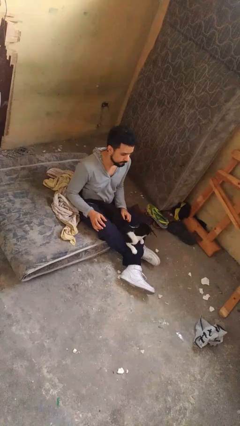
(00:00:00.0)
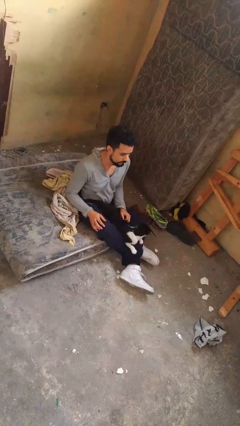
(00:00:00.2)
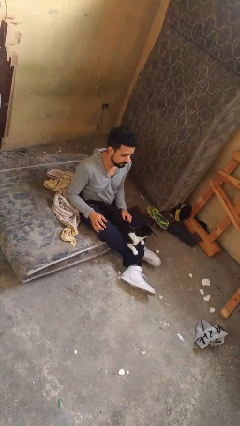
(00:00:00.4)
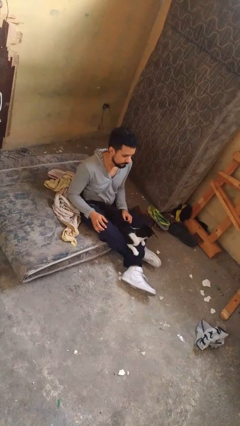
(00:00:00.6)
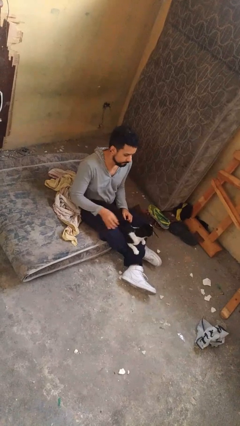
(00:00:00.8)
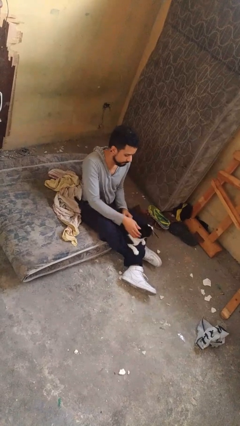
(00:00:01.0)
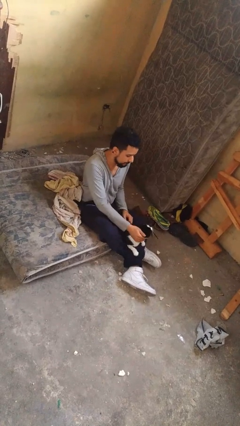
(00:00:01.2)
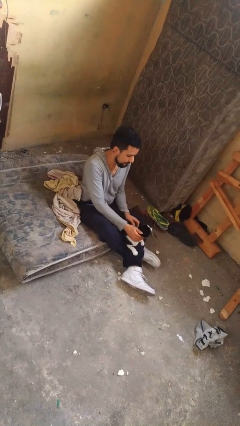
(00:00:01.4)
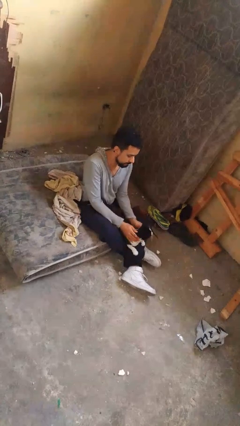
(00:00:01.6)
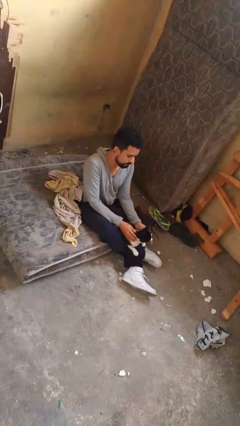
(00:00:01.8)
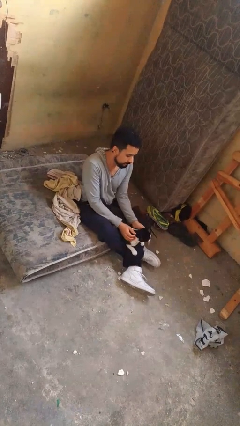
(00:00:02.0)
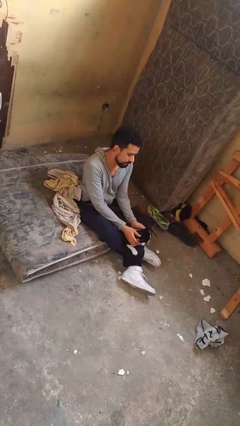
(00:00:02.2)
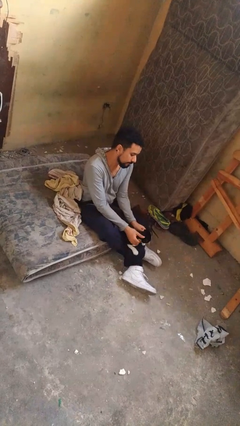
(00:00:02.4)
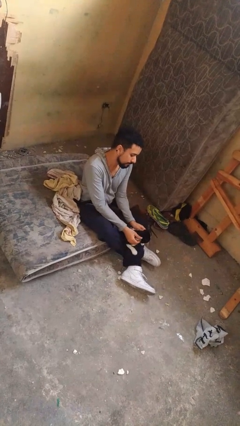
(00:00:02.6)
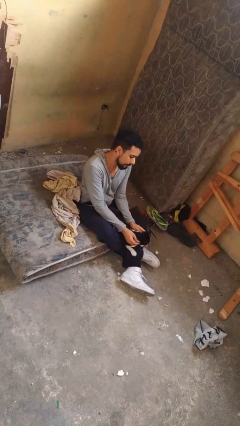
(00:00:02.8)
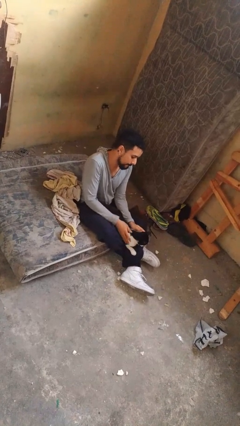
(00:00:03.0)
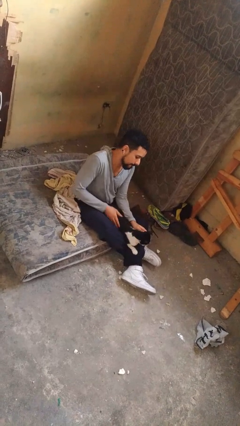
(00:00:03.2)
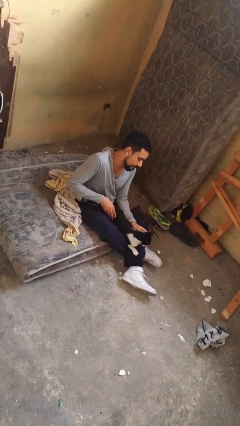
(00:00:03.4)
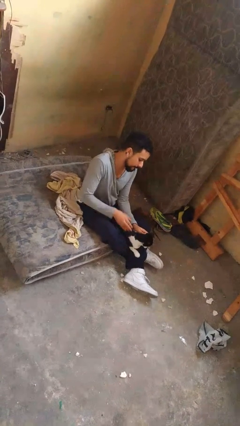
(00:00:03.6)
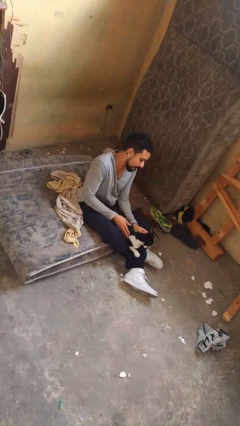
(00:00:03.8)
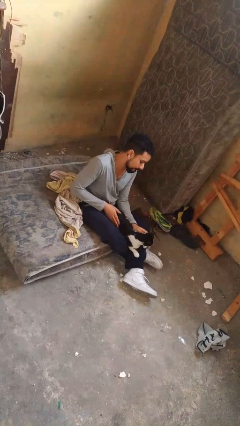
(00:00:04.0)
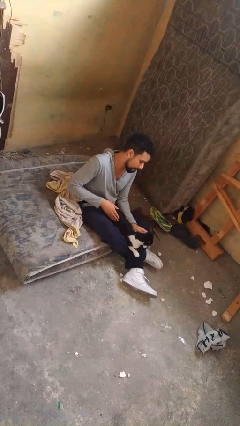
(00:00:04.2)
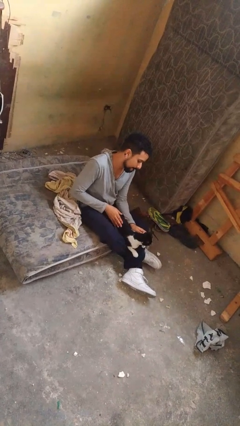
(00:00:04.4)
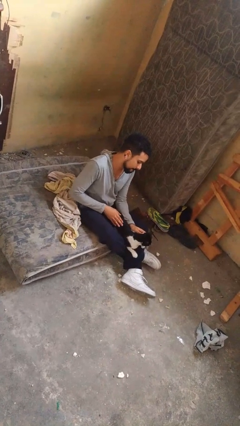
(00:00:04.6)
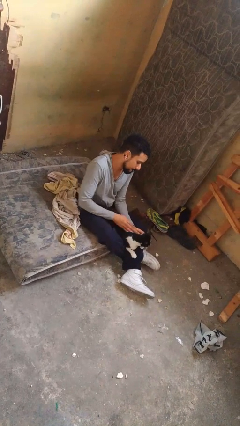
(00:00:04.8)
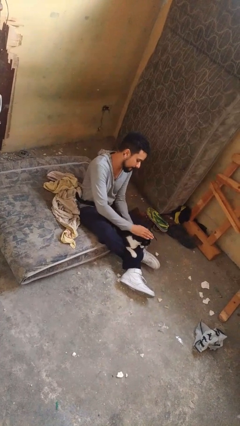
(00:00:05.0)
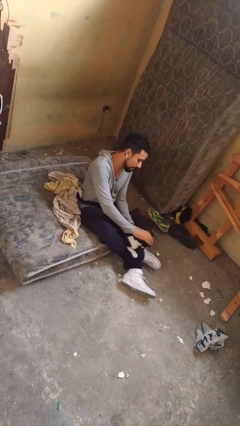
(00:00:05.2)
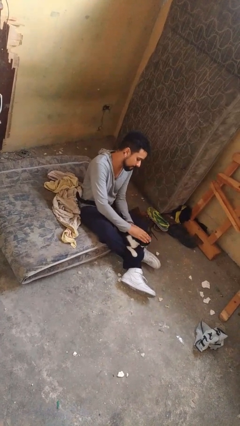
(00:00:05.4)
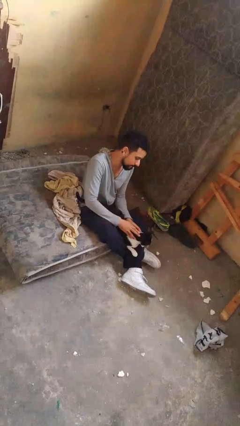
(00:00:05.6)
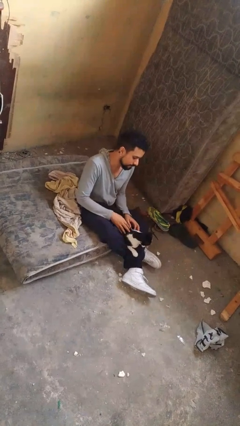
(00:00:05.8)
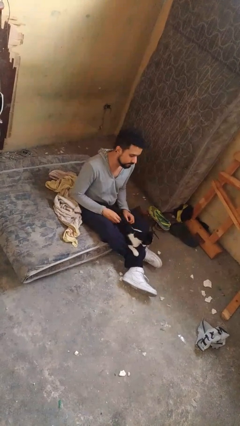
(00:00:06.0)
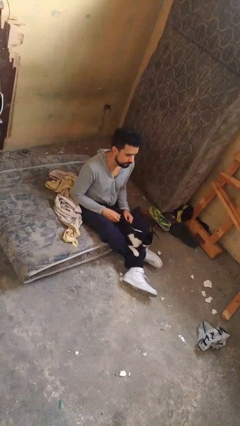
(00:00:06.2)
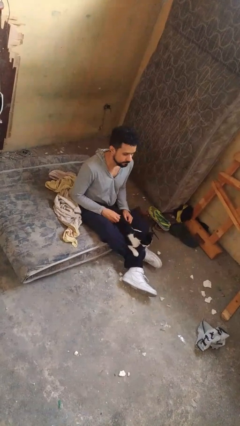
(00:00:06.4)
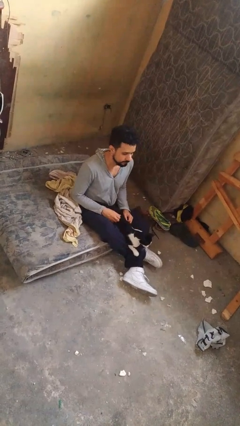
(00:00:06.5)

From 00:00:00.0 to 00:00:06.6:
person pets cat

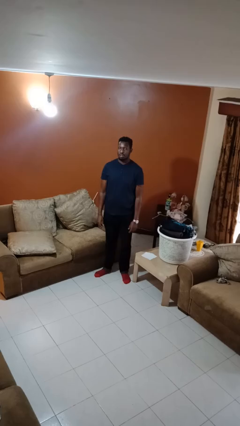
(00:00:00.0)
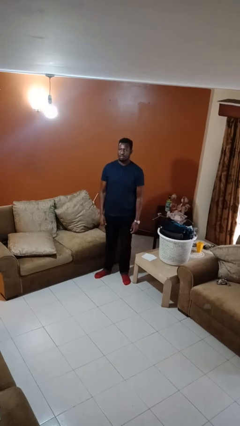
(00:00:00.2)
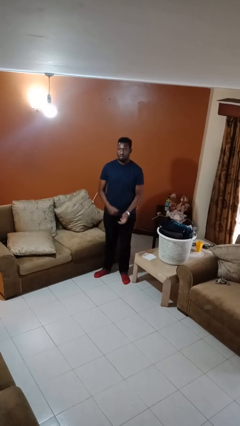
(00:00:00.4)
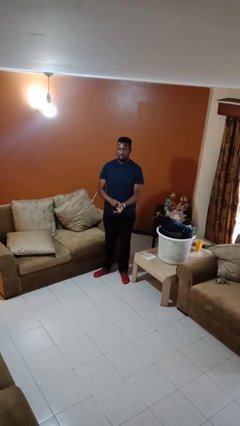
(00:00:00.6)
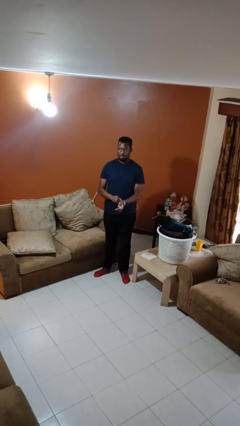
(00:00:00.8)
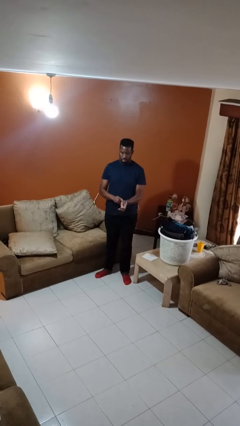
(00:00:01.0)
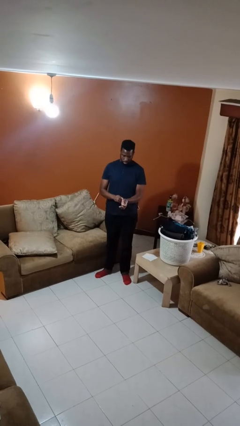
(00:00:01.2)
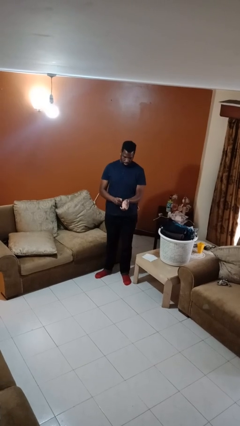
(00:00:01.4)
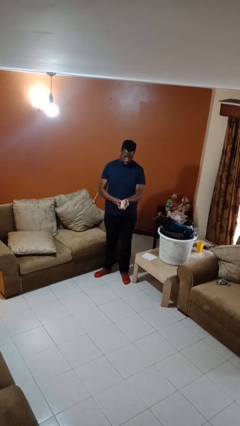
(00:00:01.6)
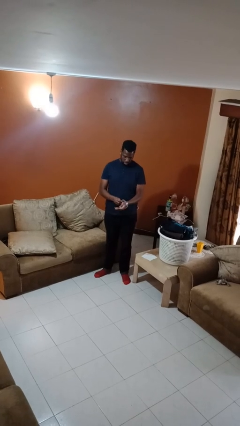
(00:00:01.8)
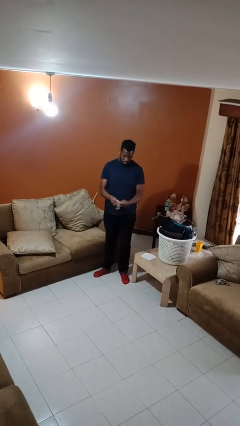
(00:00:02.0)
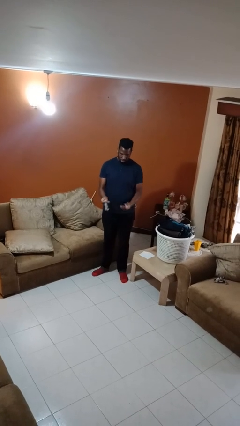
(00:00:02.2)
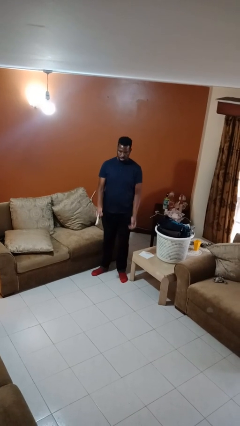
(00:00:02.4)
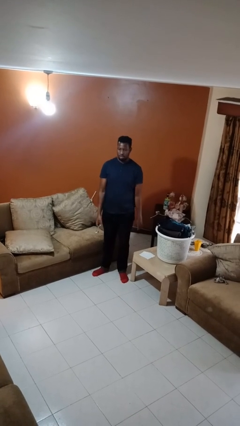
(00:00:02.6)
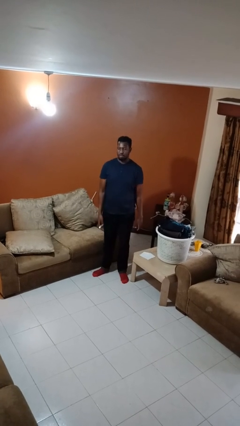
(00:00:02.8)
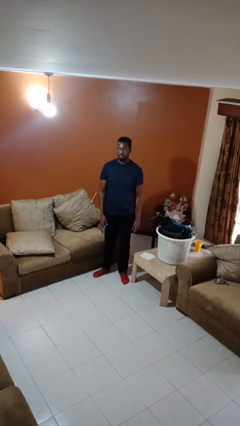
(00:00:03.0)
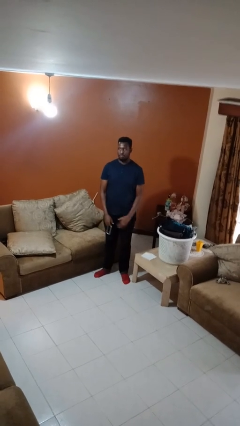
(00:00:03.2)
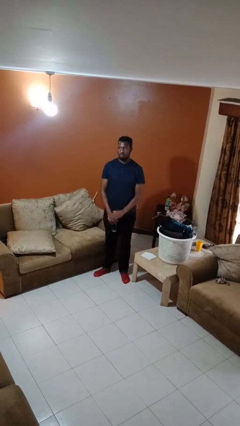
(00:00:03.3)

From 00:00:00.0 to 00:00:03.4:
person takes off wristwatch

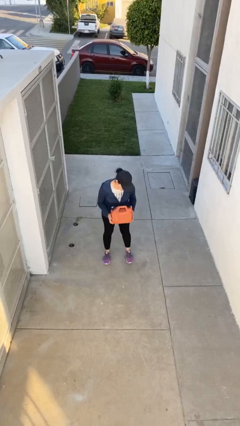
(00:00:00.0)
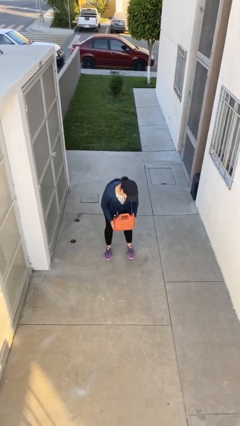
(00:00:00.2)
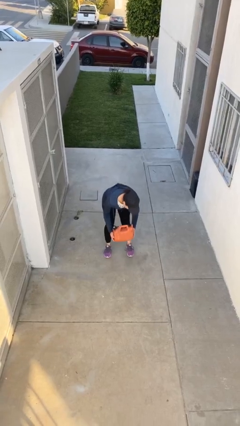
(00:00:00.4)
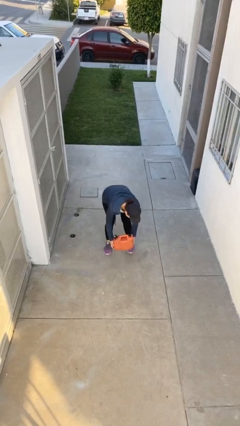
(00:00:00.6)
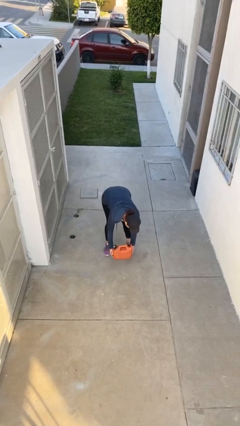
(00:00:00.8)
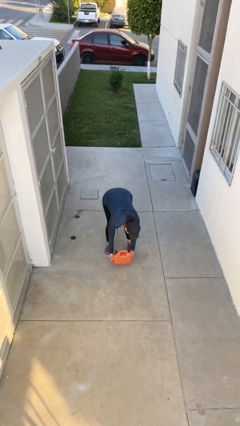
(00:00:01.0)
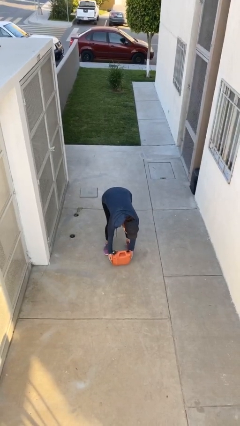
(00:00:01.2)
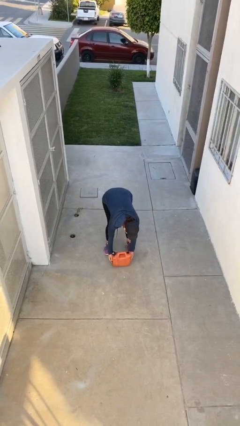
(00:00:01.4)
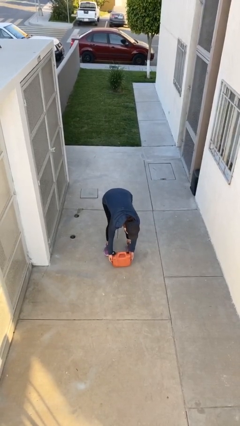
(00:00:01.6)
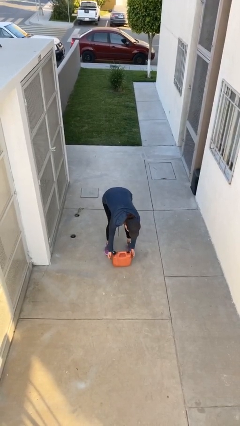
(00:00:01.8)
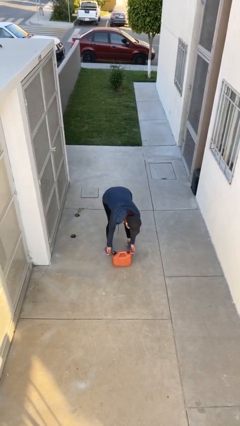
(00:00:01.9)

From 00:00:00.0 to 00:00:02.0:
person puts down object on floor

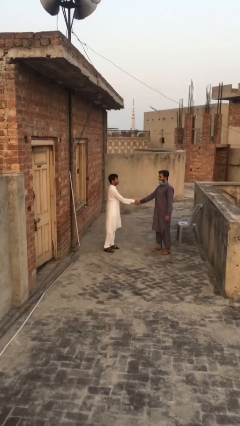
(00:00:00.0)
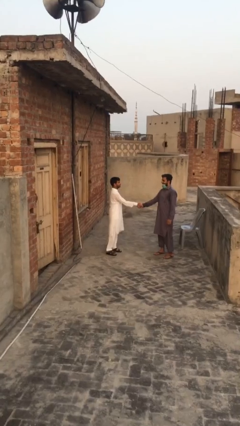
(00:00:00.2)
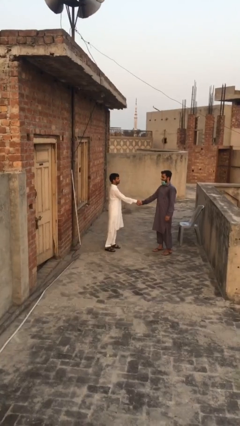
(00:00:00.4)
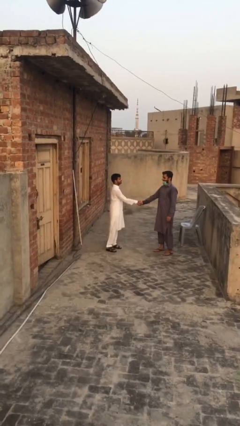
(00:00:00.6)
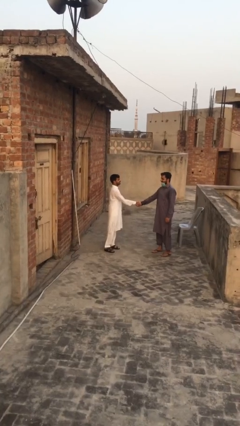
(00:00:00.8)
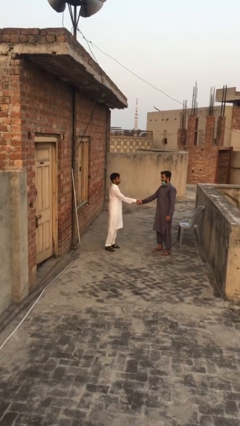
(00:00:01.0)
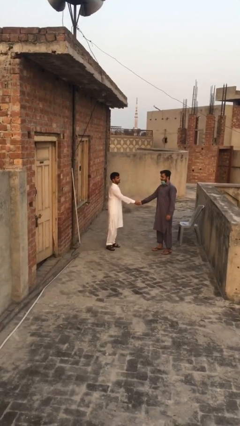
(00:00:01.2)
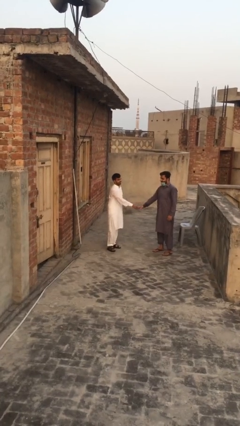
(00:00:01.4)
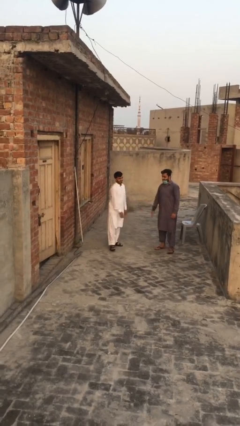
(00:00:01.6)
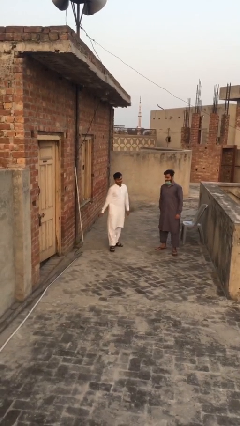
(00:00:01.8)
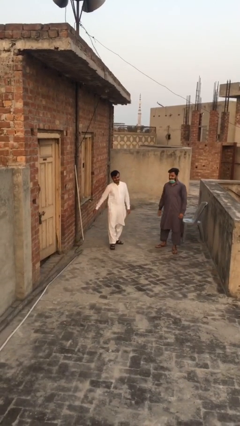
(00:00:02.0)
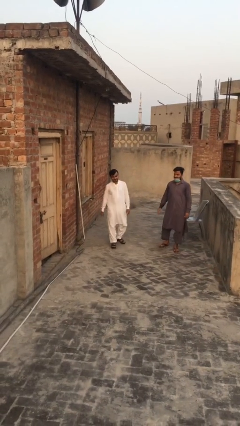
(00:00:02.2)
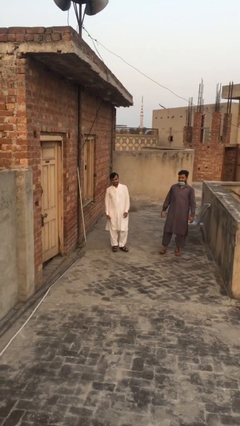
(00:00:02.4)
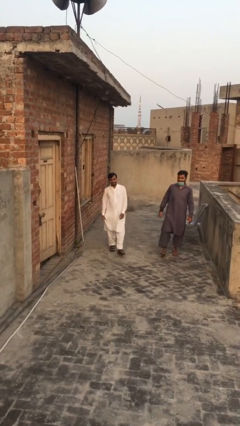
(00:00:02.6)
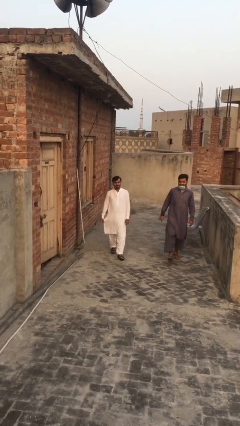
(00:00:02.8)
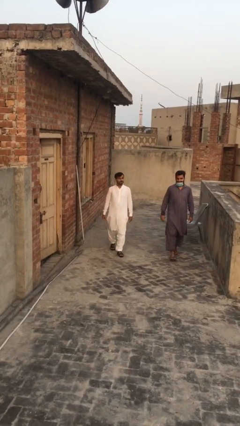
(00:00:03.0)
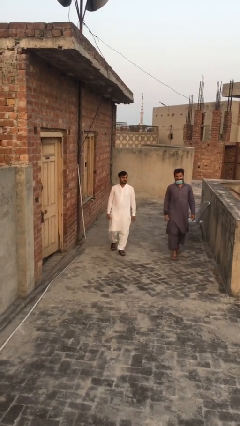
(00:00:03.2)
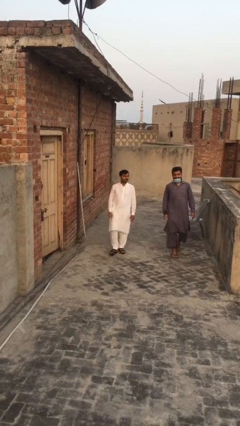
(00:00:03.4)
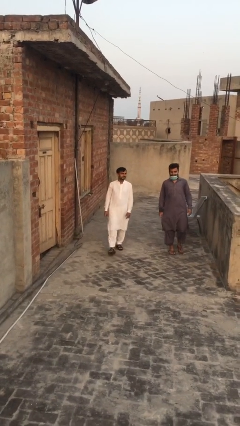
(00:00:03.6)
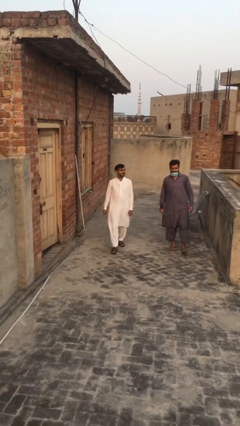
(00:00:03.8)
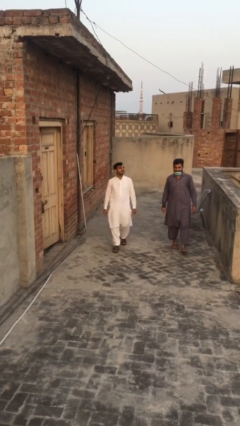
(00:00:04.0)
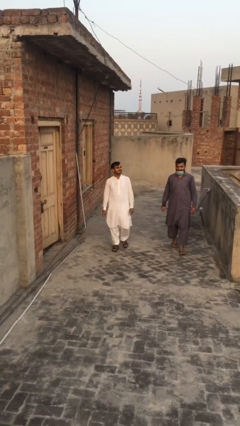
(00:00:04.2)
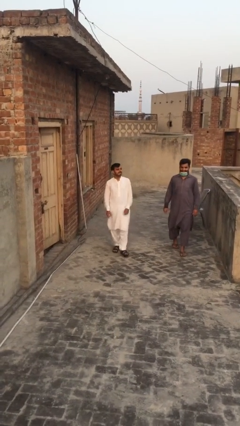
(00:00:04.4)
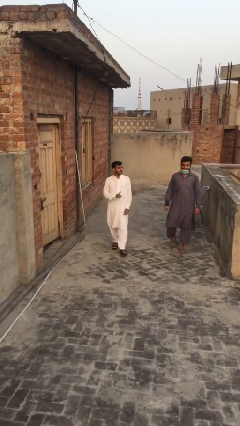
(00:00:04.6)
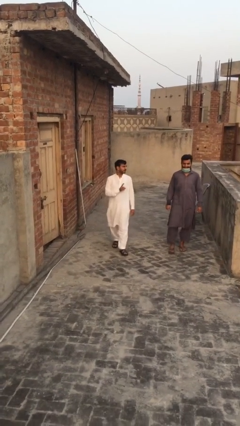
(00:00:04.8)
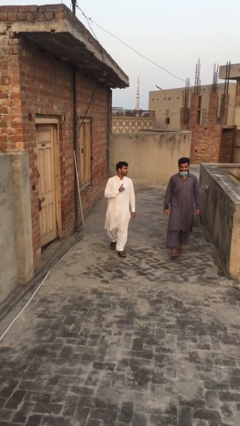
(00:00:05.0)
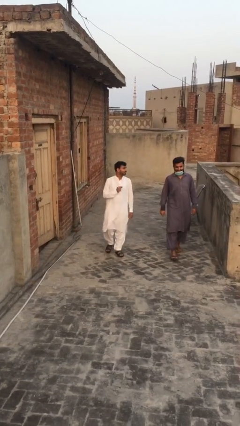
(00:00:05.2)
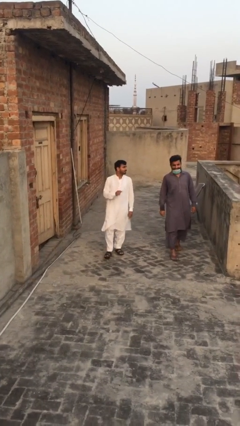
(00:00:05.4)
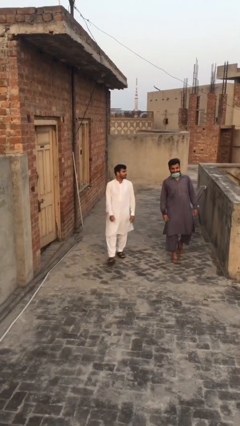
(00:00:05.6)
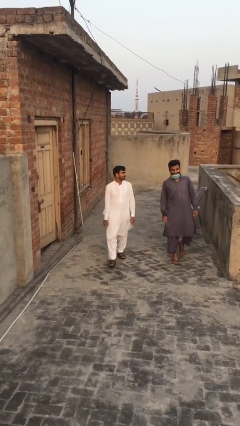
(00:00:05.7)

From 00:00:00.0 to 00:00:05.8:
person talks to person
